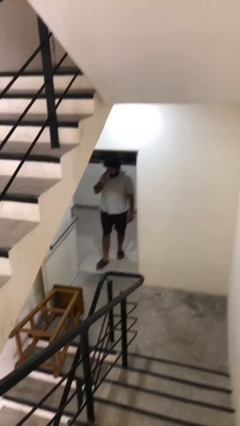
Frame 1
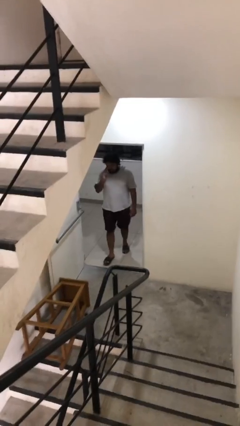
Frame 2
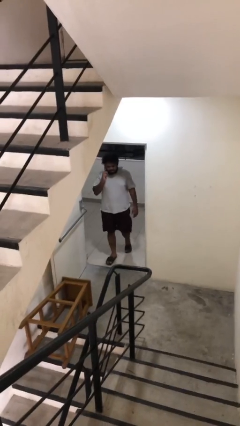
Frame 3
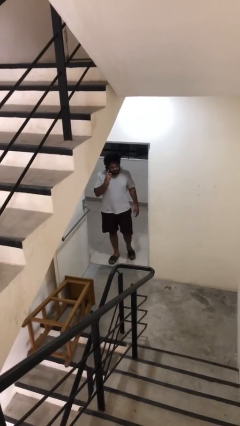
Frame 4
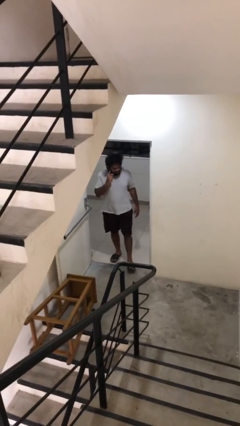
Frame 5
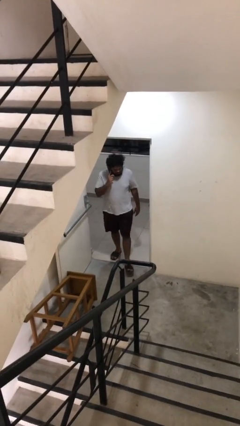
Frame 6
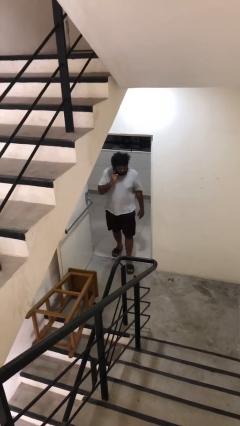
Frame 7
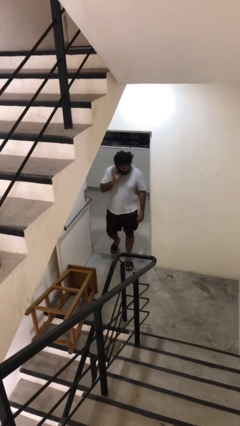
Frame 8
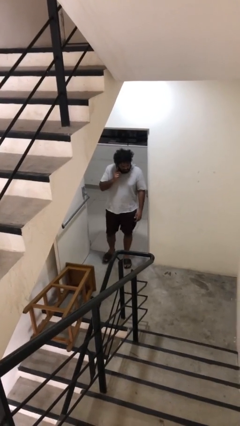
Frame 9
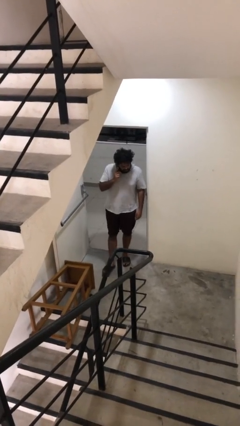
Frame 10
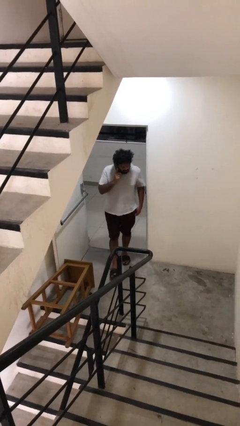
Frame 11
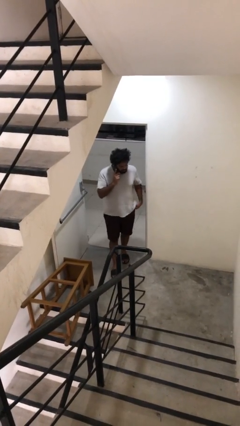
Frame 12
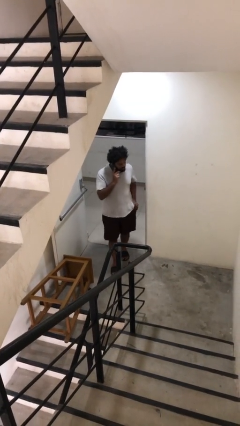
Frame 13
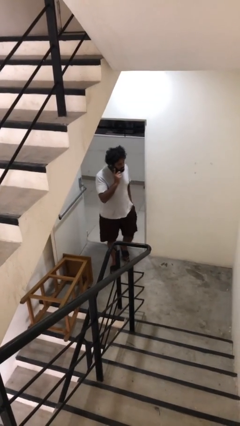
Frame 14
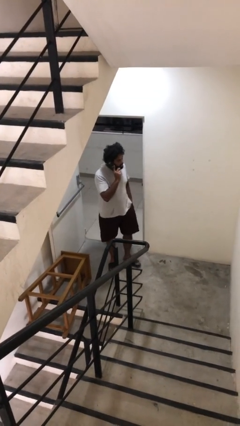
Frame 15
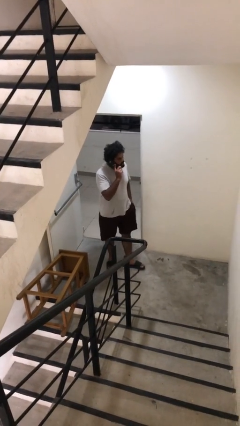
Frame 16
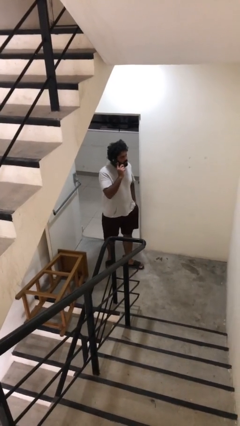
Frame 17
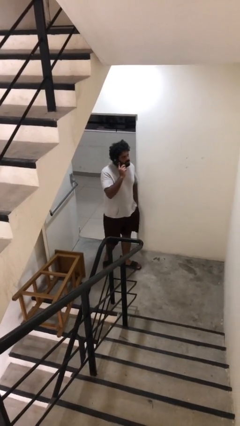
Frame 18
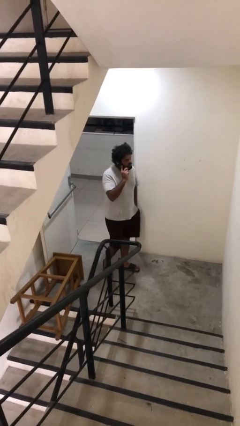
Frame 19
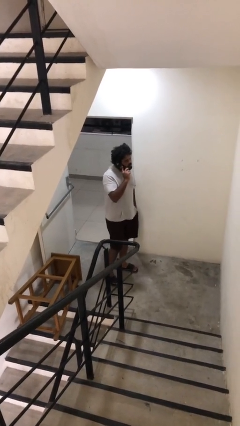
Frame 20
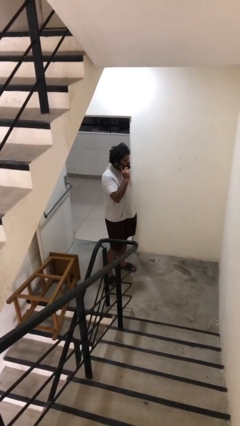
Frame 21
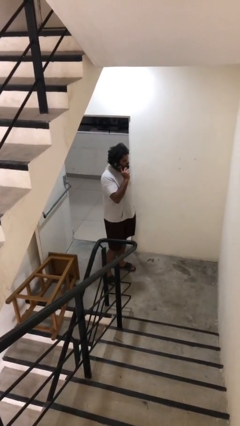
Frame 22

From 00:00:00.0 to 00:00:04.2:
person enters scene through structure

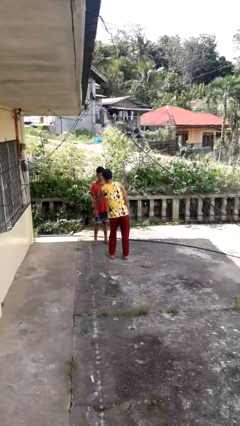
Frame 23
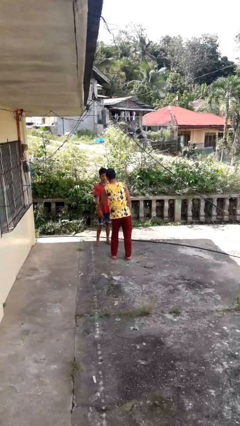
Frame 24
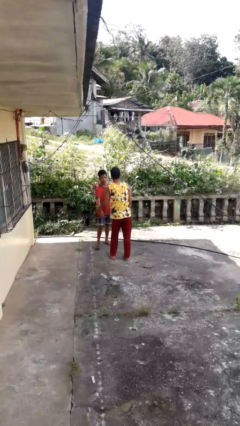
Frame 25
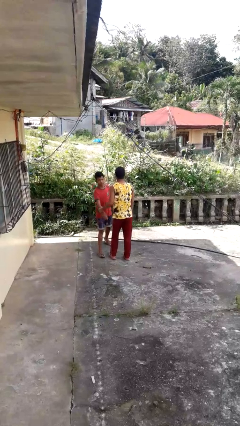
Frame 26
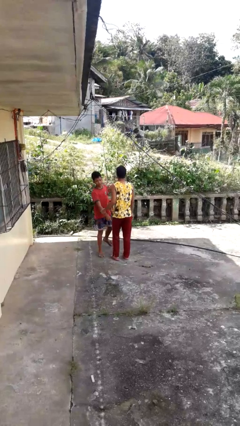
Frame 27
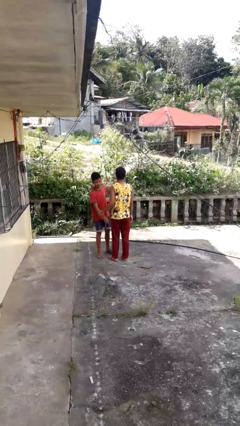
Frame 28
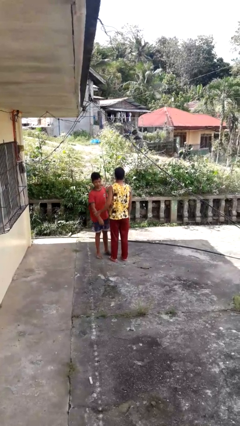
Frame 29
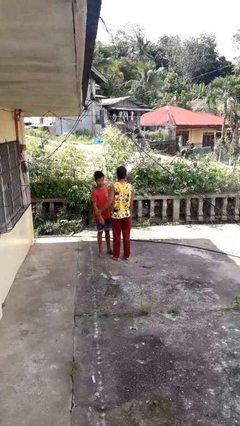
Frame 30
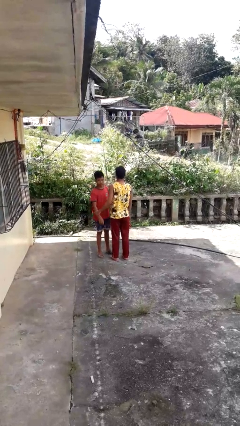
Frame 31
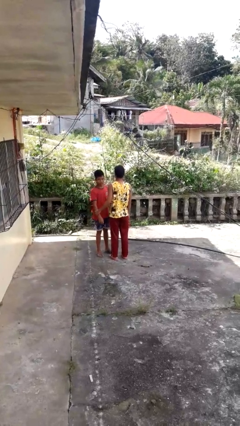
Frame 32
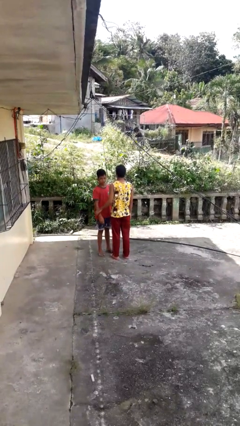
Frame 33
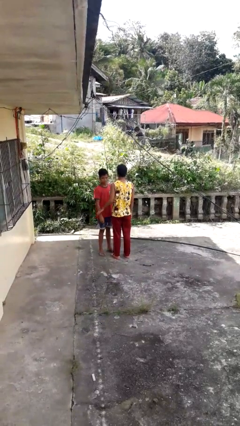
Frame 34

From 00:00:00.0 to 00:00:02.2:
person grabs person by forearm

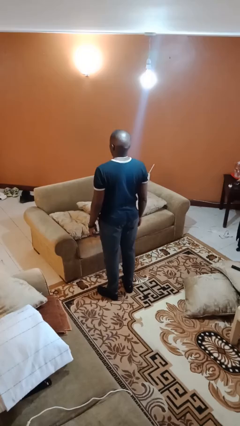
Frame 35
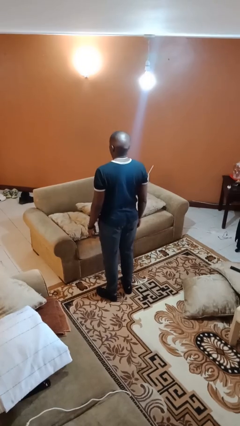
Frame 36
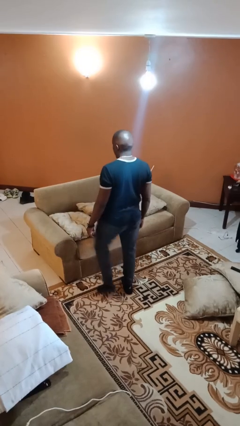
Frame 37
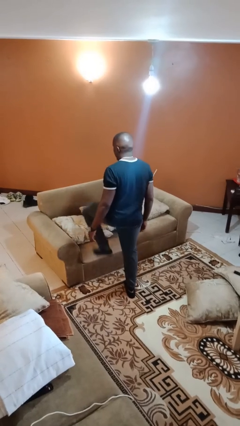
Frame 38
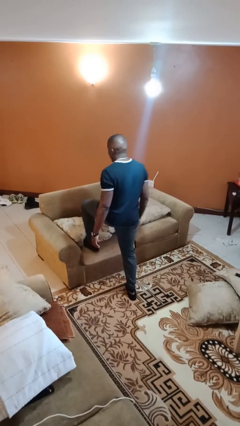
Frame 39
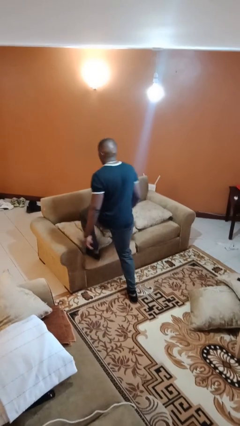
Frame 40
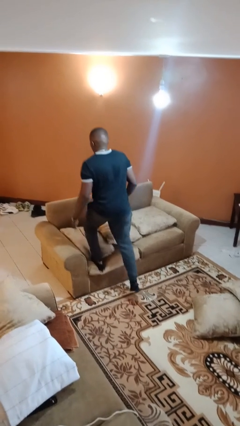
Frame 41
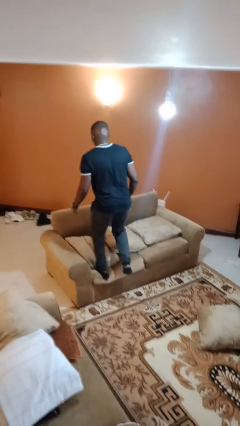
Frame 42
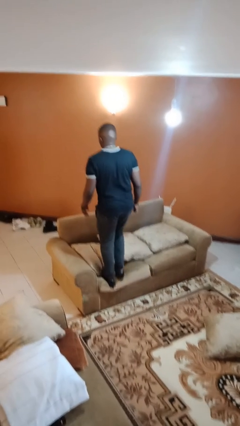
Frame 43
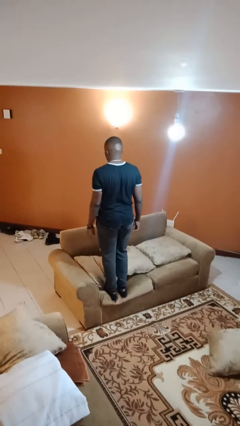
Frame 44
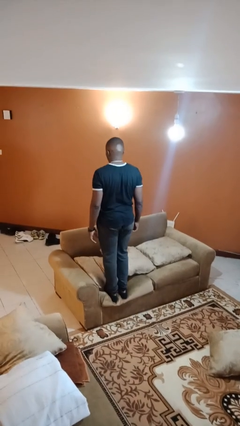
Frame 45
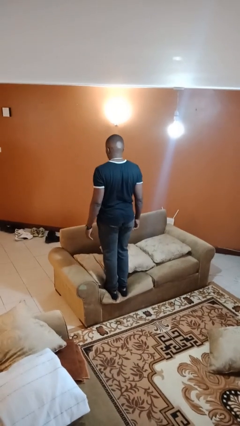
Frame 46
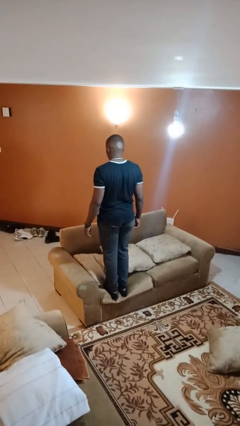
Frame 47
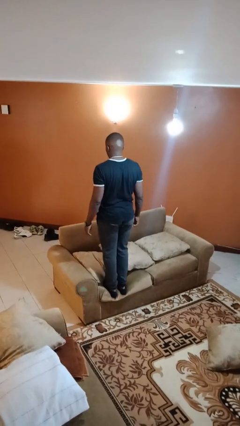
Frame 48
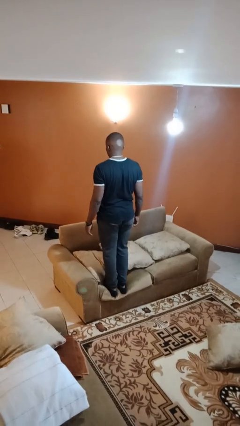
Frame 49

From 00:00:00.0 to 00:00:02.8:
person climbs on couch

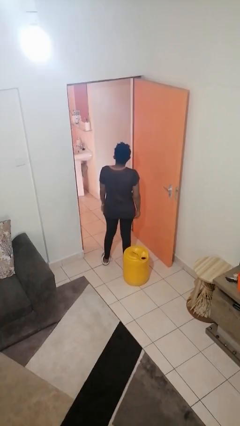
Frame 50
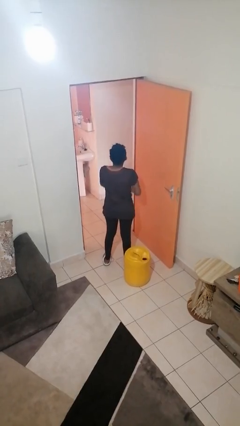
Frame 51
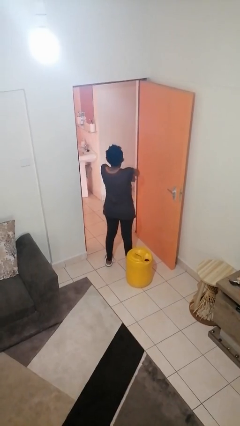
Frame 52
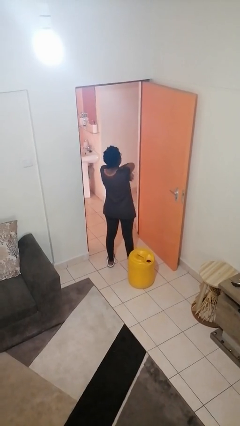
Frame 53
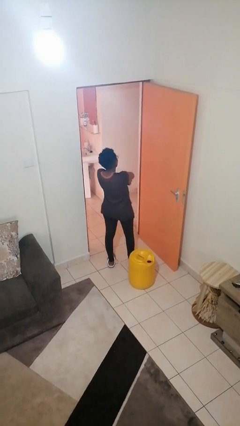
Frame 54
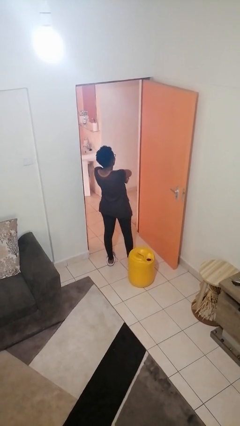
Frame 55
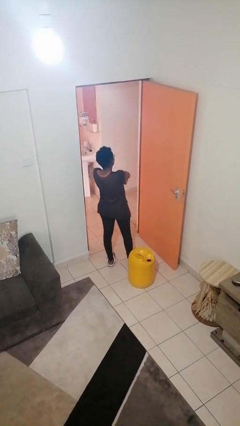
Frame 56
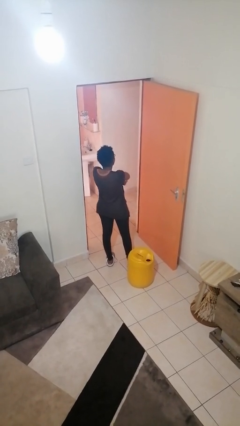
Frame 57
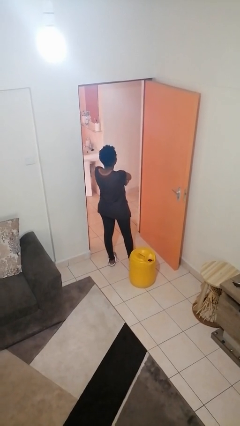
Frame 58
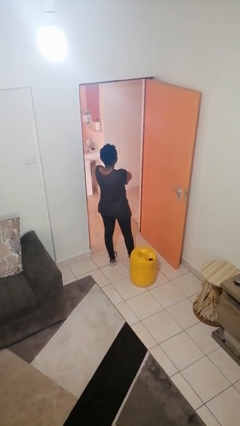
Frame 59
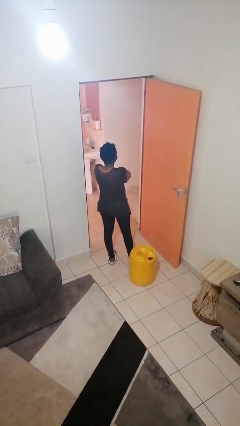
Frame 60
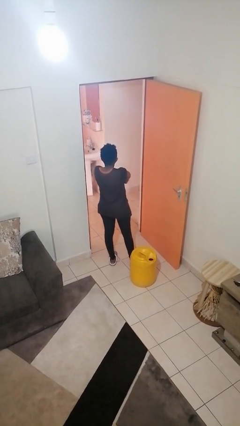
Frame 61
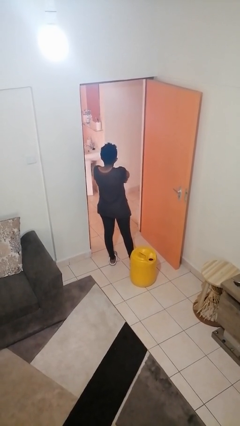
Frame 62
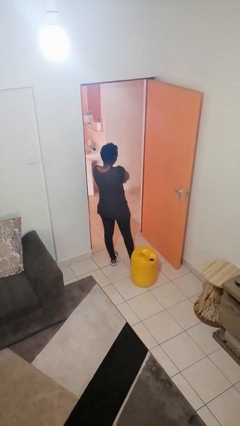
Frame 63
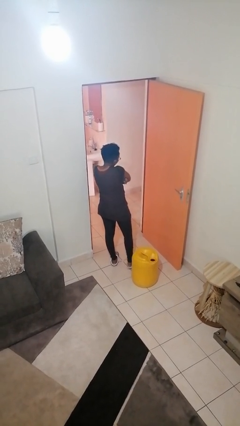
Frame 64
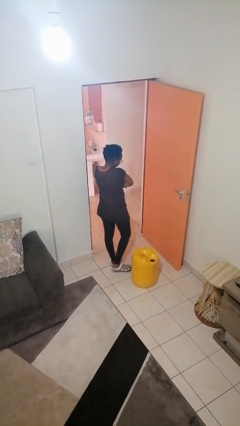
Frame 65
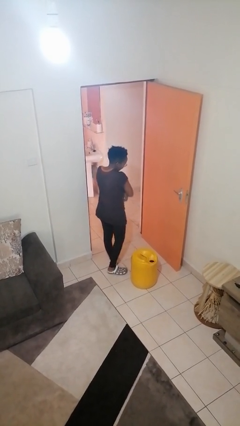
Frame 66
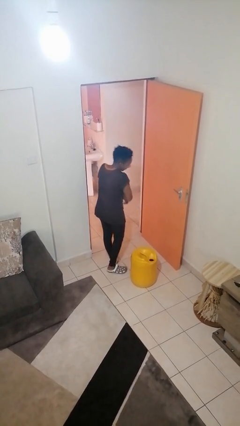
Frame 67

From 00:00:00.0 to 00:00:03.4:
person crosses arms

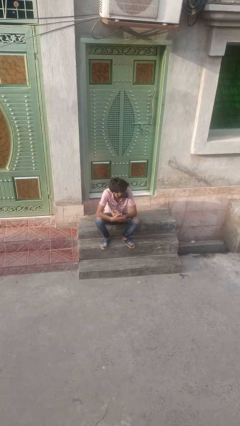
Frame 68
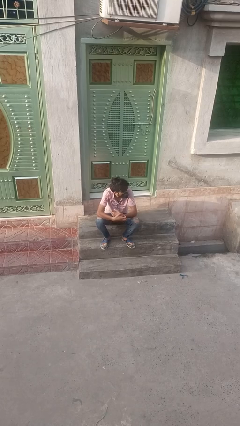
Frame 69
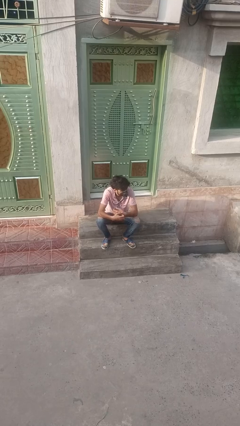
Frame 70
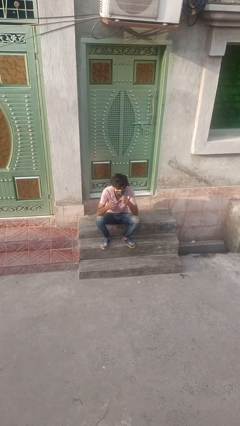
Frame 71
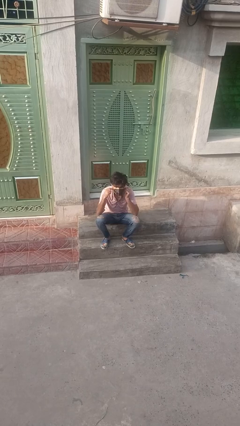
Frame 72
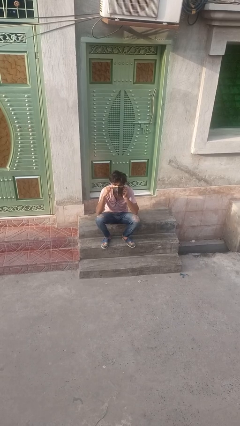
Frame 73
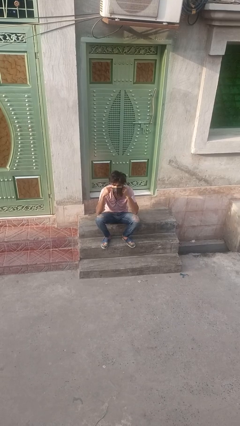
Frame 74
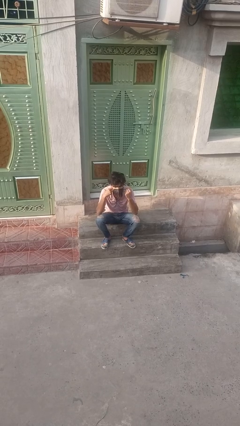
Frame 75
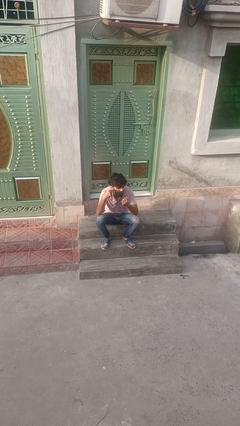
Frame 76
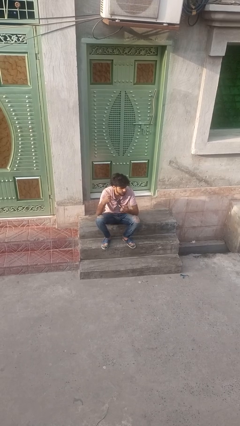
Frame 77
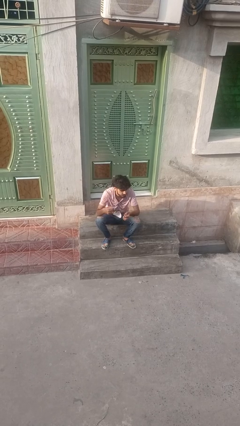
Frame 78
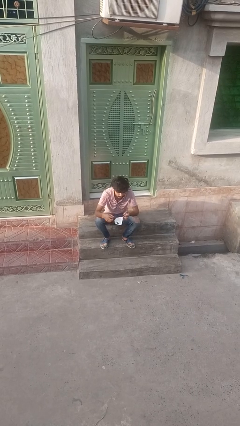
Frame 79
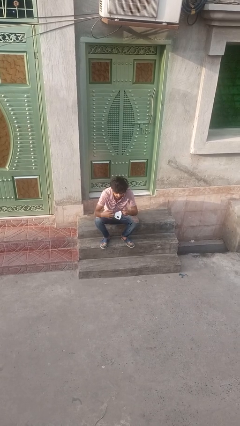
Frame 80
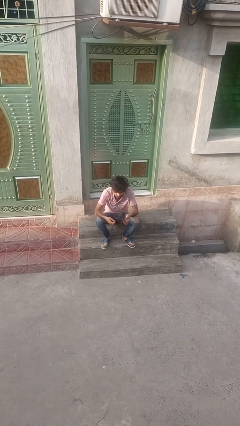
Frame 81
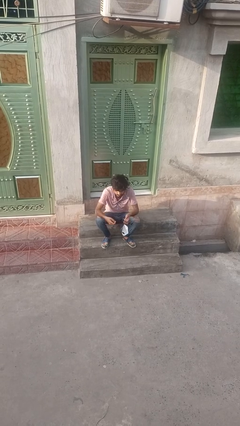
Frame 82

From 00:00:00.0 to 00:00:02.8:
person takes off facemask

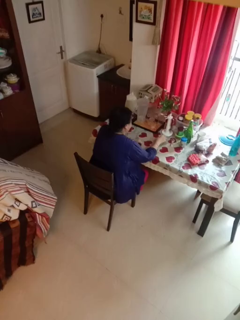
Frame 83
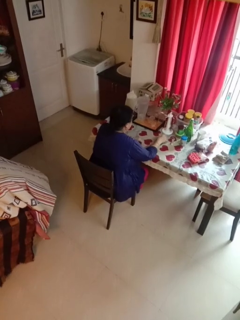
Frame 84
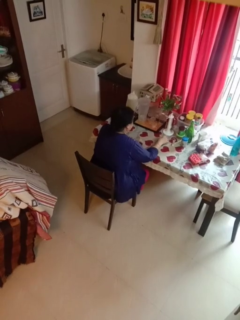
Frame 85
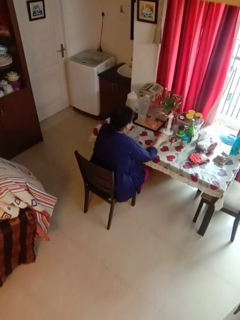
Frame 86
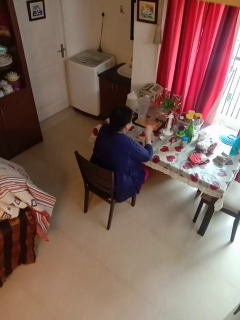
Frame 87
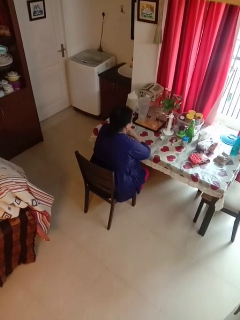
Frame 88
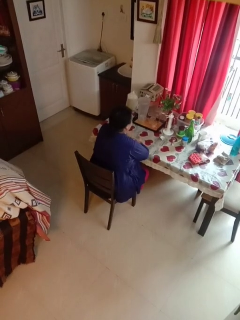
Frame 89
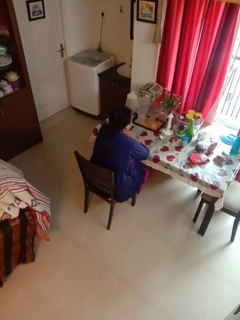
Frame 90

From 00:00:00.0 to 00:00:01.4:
person puts down object on table

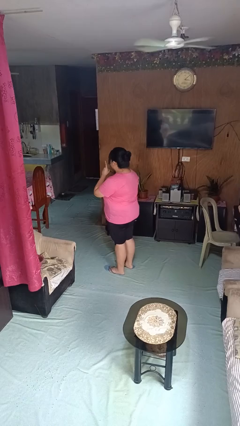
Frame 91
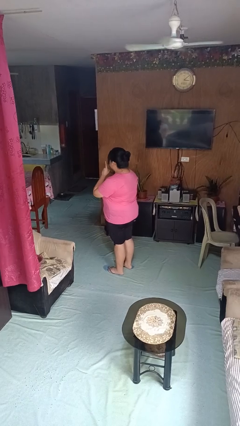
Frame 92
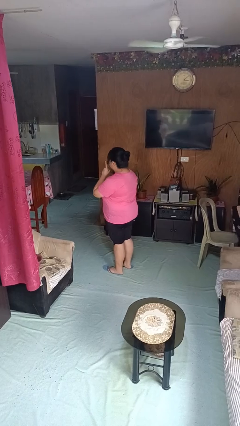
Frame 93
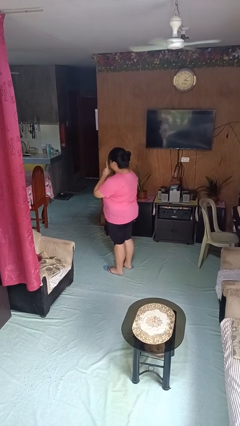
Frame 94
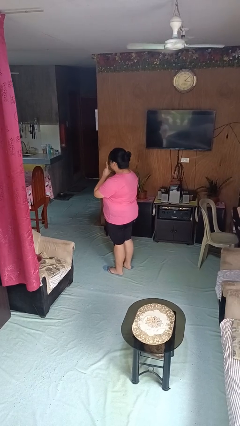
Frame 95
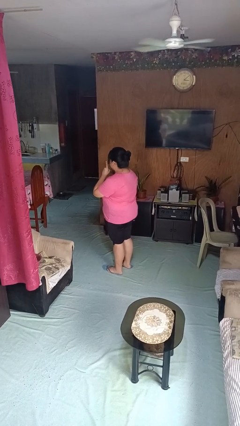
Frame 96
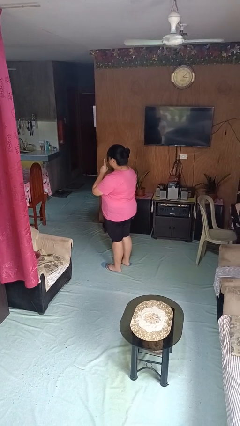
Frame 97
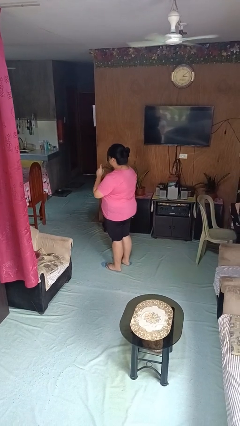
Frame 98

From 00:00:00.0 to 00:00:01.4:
person gestures be quiet
